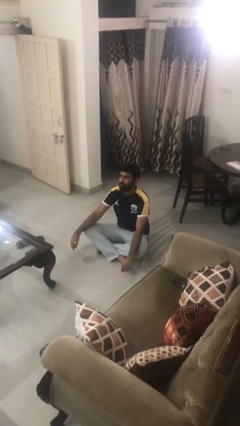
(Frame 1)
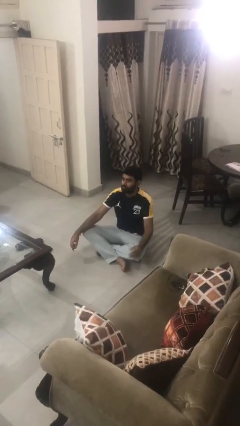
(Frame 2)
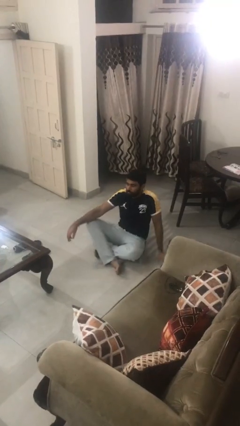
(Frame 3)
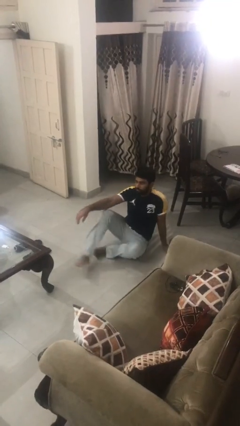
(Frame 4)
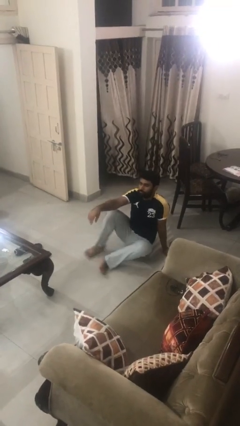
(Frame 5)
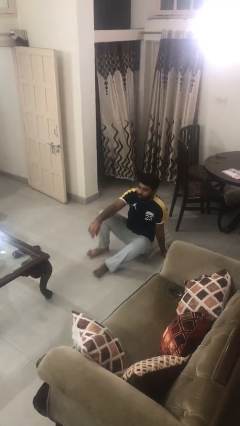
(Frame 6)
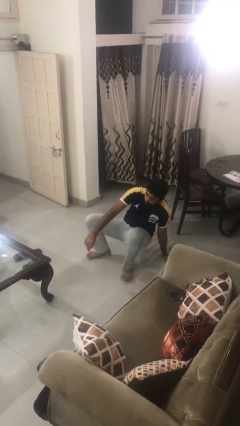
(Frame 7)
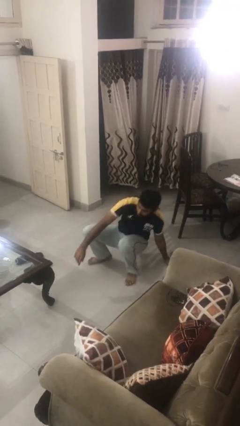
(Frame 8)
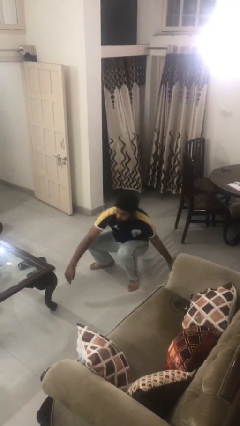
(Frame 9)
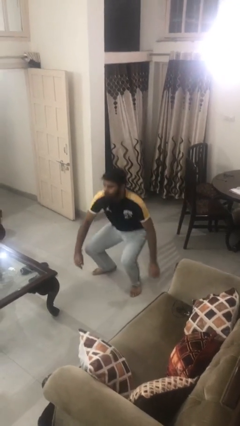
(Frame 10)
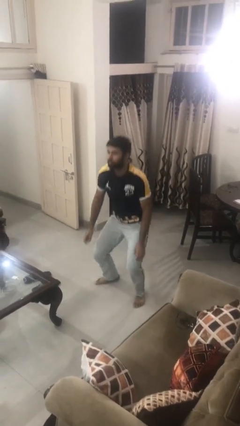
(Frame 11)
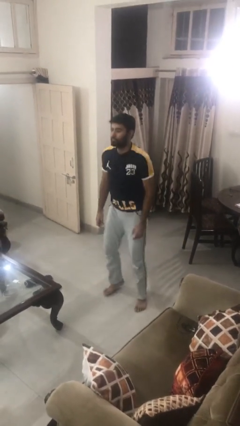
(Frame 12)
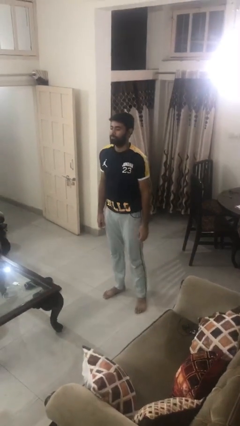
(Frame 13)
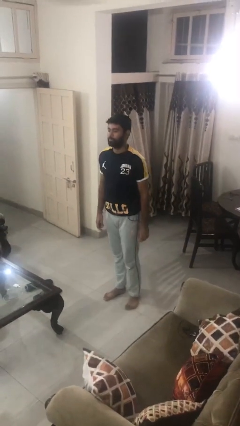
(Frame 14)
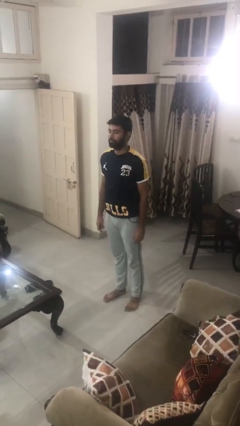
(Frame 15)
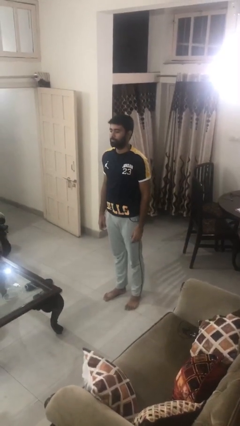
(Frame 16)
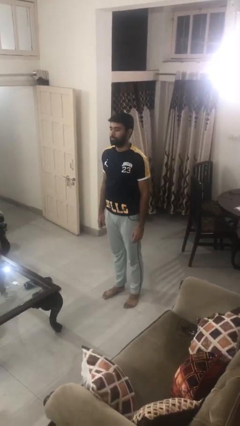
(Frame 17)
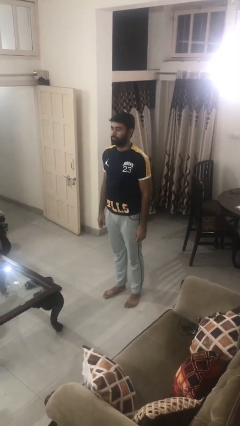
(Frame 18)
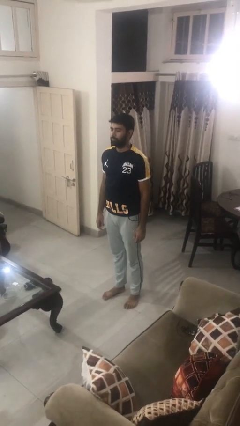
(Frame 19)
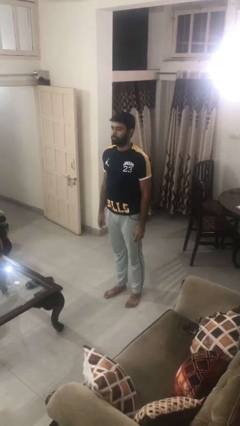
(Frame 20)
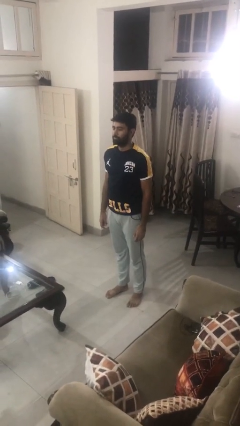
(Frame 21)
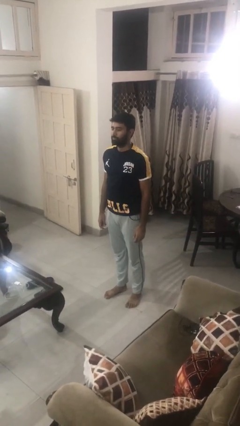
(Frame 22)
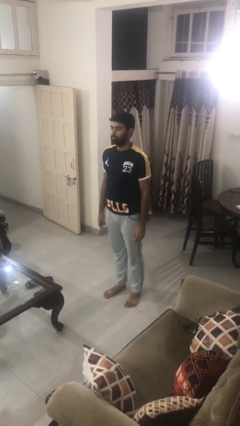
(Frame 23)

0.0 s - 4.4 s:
person stands up from floor

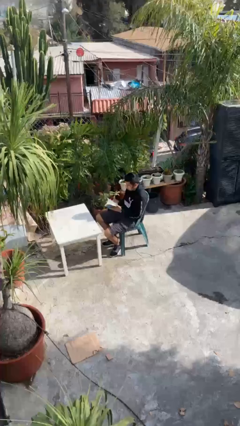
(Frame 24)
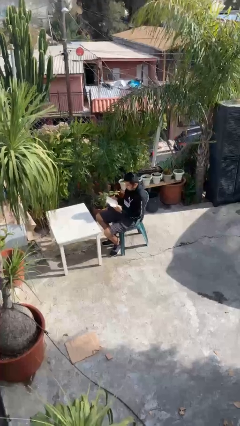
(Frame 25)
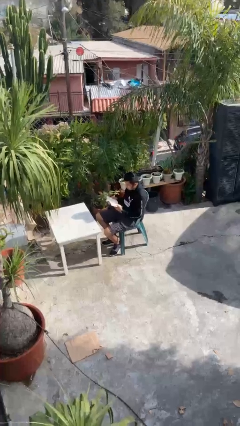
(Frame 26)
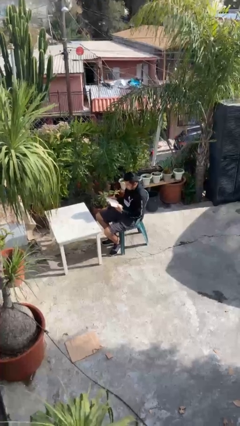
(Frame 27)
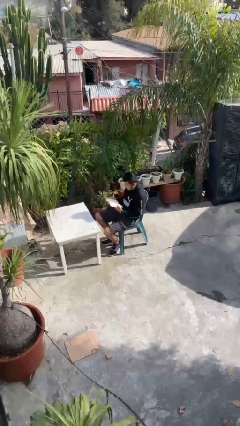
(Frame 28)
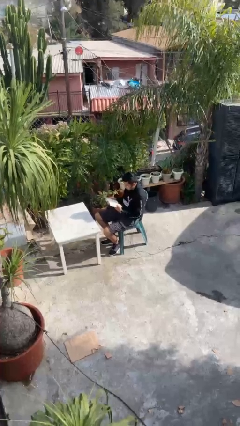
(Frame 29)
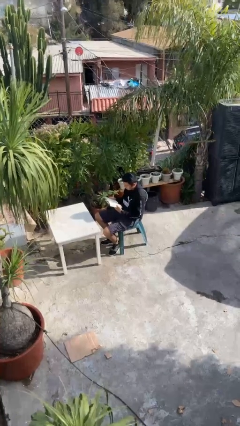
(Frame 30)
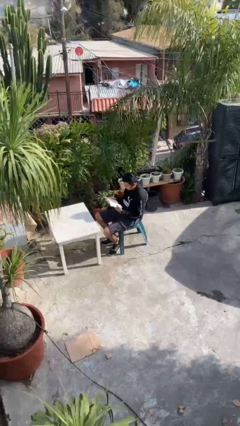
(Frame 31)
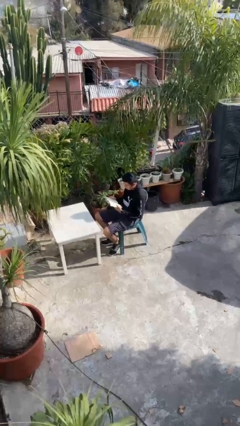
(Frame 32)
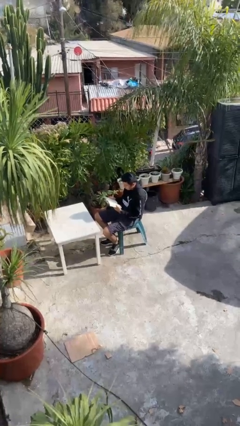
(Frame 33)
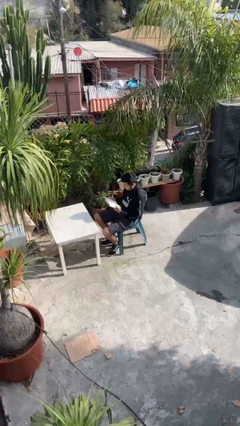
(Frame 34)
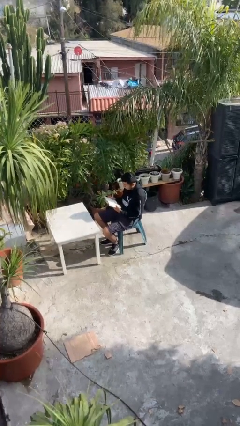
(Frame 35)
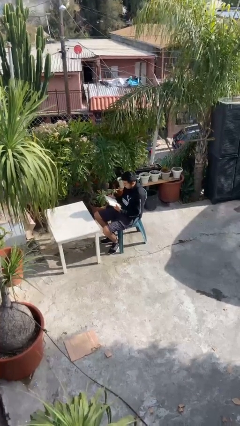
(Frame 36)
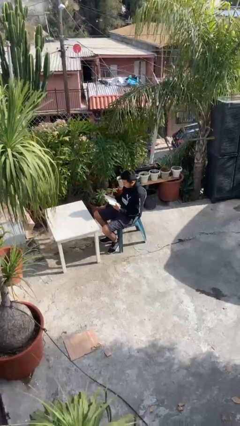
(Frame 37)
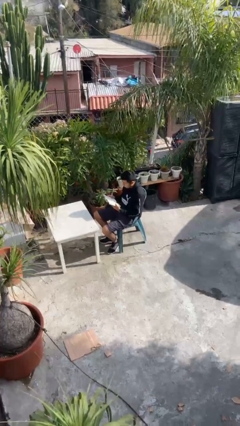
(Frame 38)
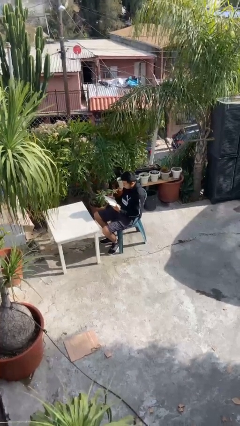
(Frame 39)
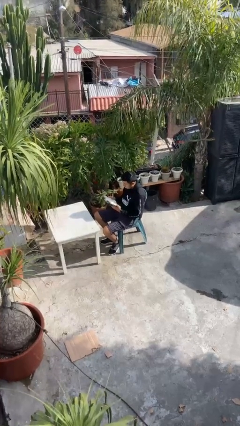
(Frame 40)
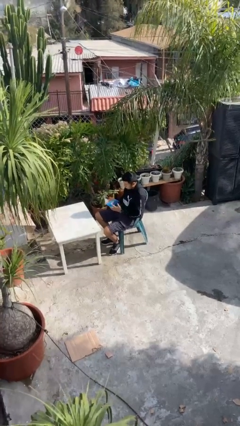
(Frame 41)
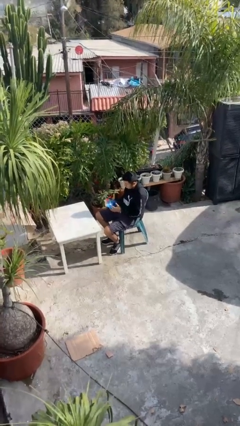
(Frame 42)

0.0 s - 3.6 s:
person reads document

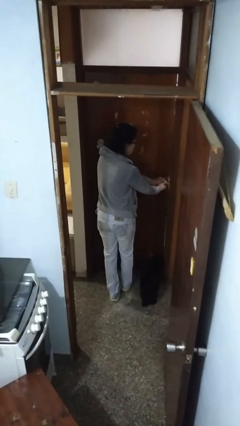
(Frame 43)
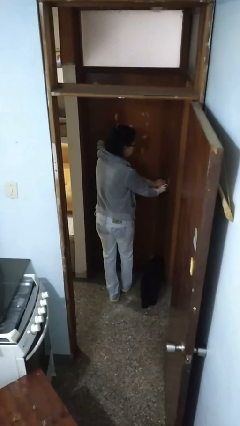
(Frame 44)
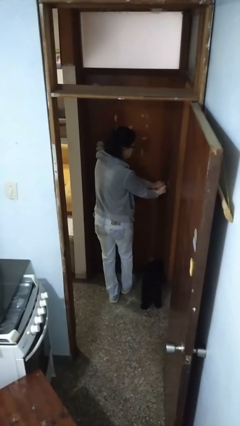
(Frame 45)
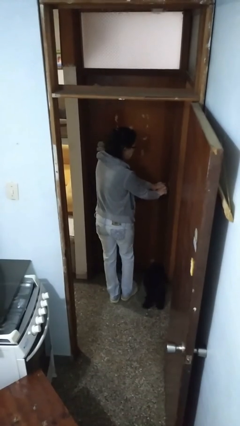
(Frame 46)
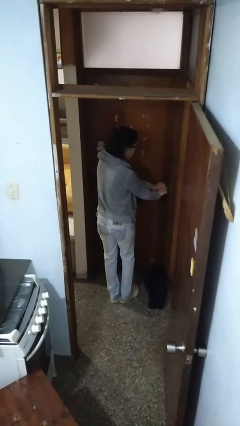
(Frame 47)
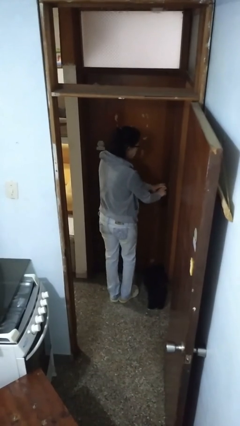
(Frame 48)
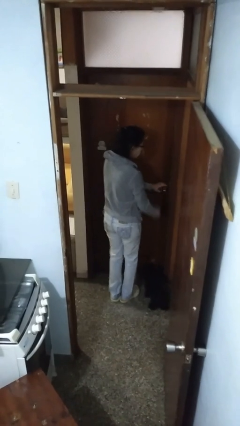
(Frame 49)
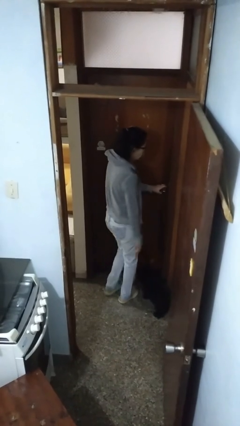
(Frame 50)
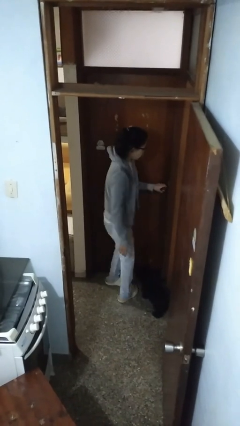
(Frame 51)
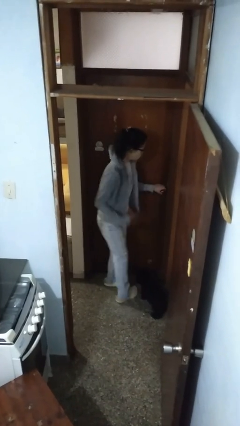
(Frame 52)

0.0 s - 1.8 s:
person closes facility door

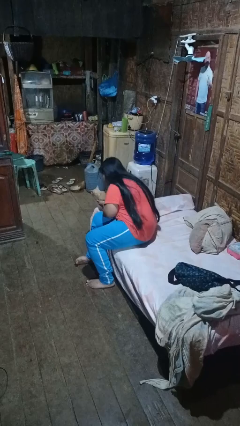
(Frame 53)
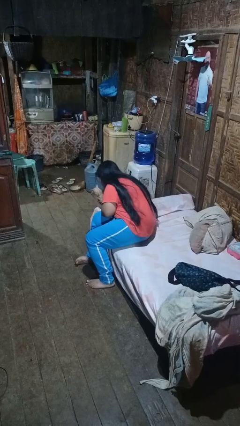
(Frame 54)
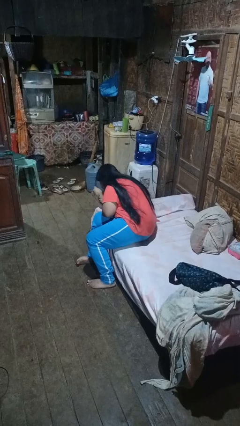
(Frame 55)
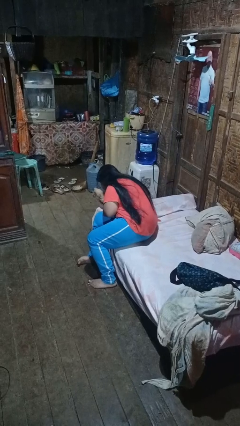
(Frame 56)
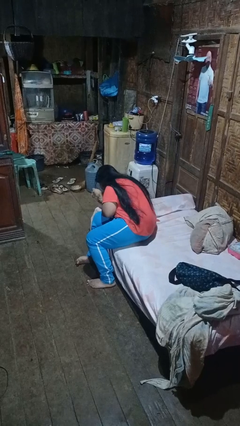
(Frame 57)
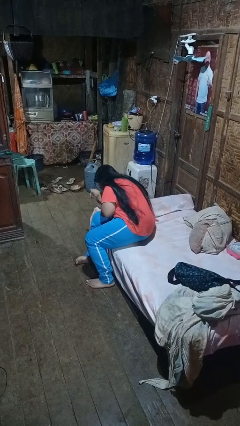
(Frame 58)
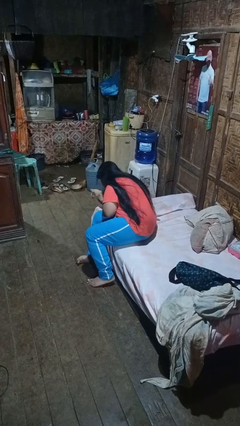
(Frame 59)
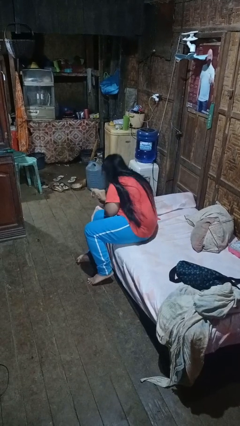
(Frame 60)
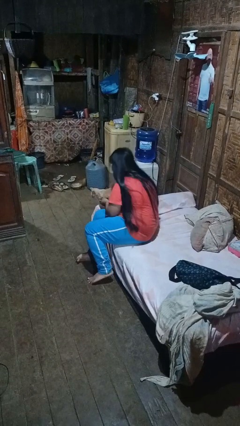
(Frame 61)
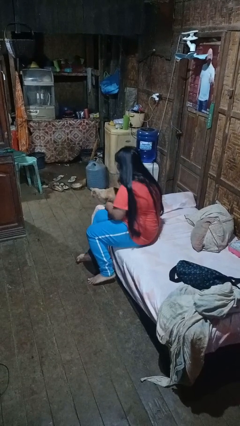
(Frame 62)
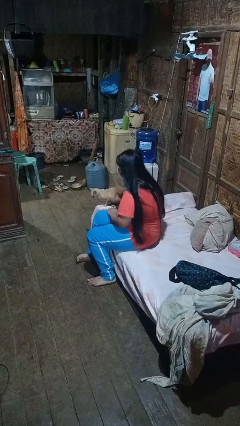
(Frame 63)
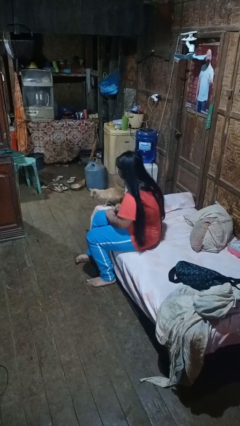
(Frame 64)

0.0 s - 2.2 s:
person hugs cat

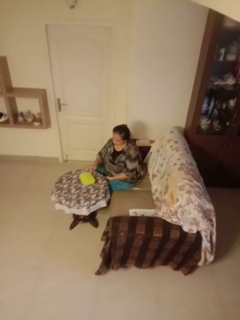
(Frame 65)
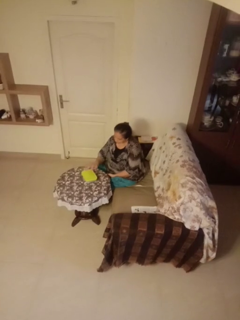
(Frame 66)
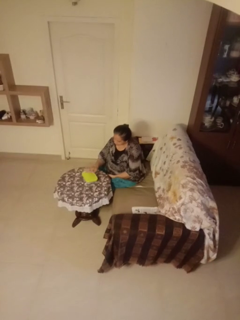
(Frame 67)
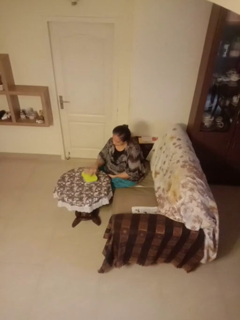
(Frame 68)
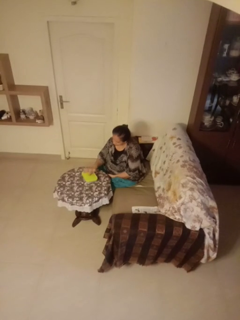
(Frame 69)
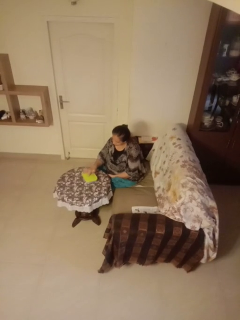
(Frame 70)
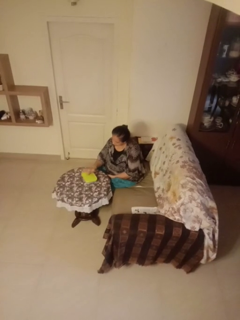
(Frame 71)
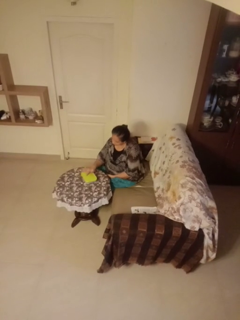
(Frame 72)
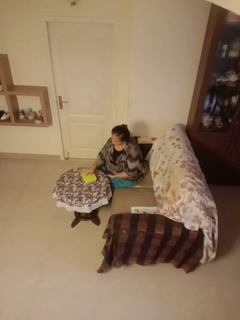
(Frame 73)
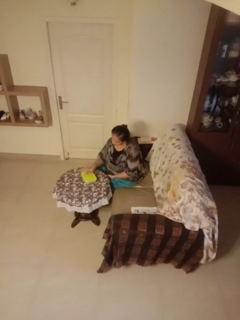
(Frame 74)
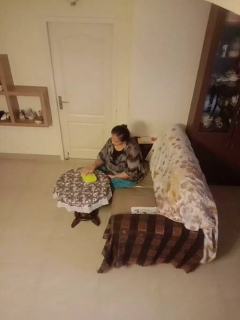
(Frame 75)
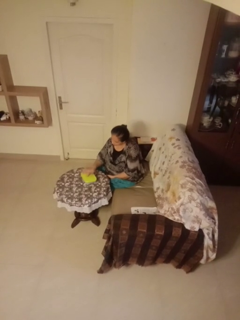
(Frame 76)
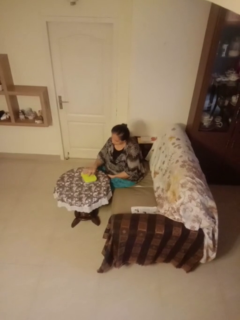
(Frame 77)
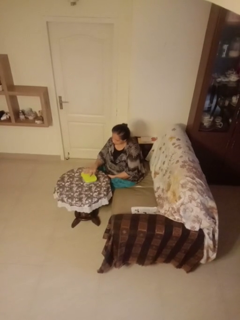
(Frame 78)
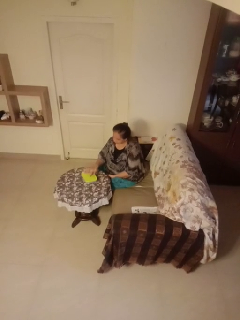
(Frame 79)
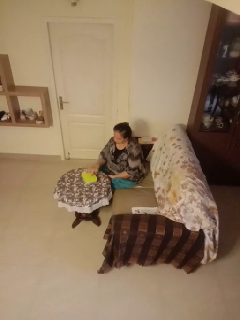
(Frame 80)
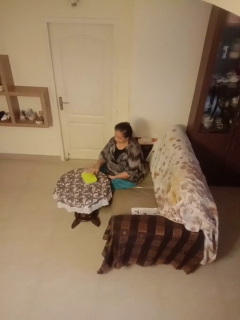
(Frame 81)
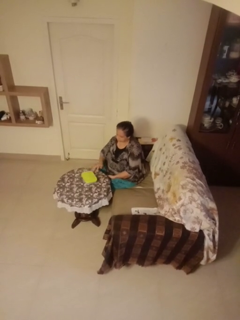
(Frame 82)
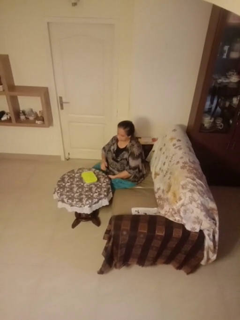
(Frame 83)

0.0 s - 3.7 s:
person taps object with finger

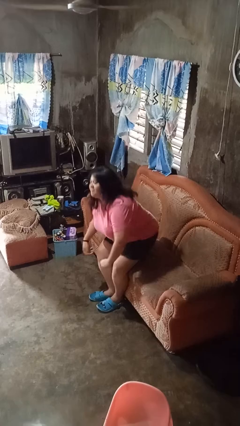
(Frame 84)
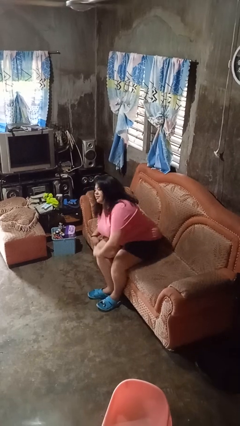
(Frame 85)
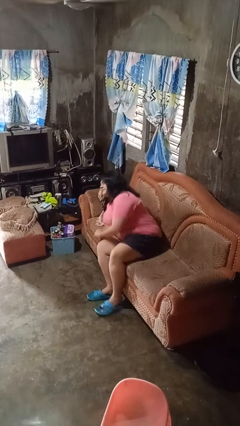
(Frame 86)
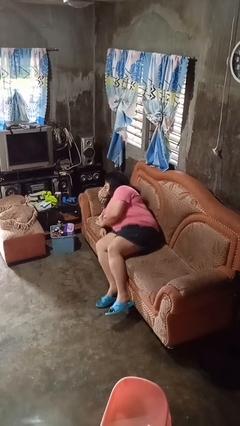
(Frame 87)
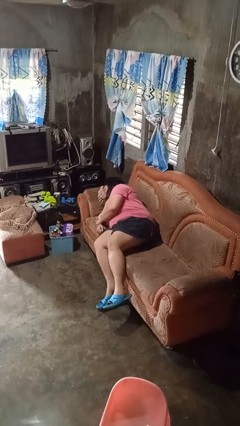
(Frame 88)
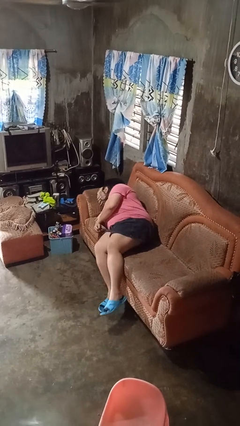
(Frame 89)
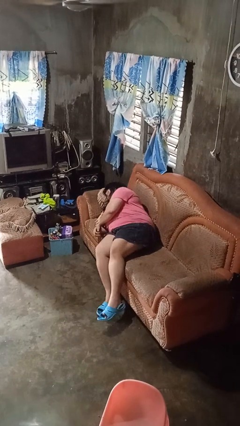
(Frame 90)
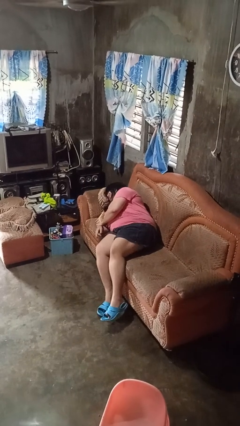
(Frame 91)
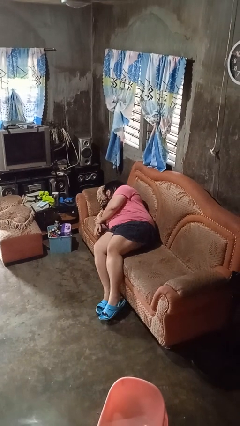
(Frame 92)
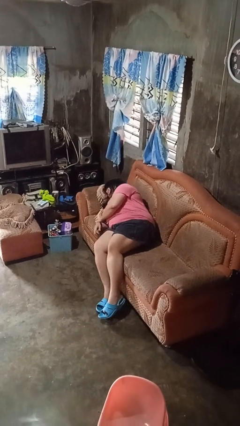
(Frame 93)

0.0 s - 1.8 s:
person lies down on couch

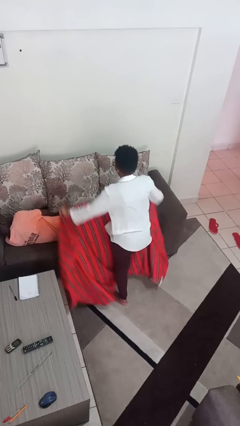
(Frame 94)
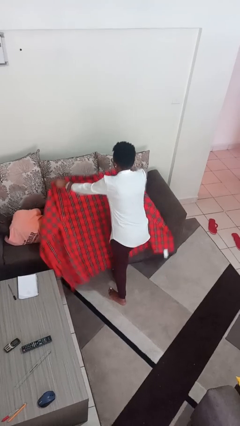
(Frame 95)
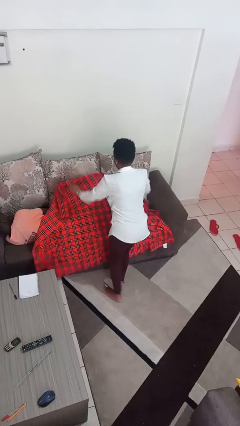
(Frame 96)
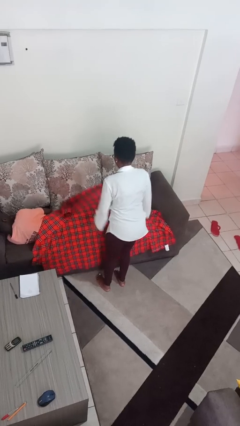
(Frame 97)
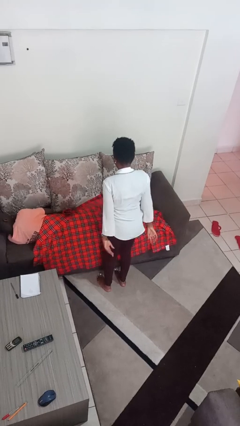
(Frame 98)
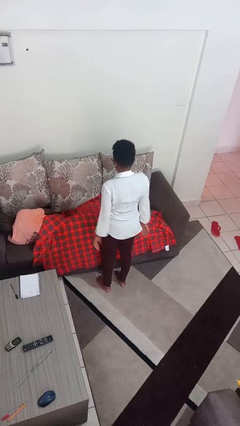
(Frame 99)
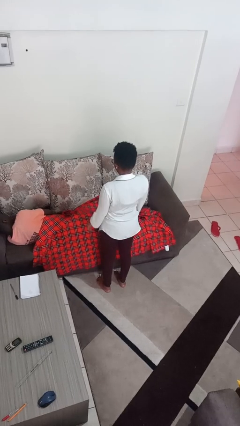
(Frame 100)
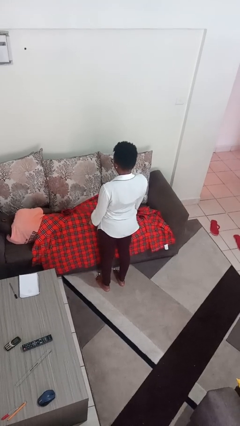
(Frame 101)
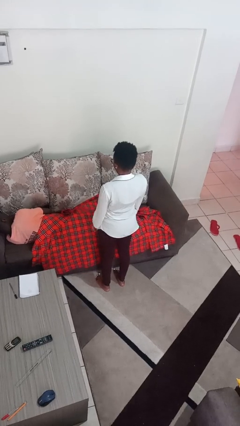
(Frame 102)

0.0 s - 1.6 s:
person covers friend with blanket
